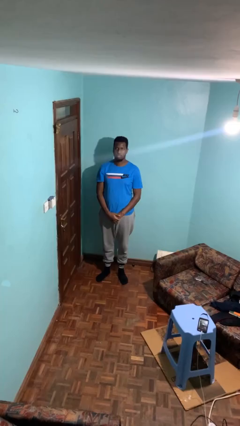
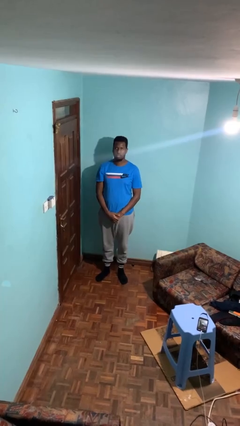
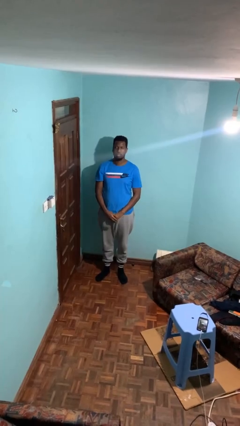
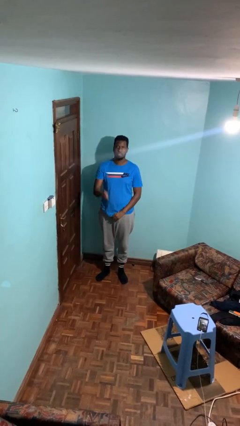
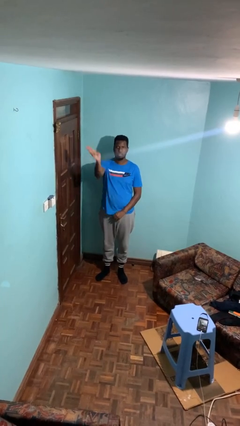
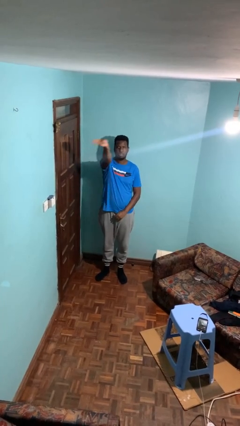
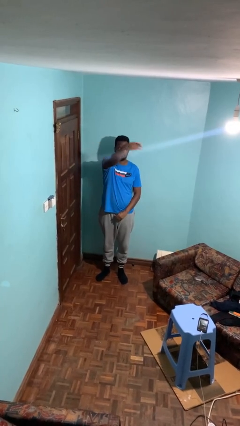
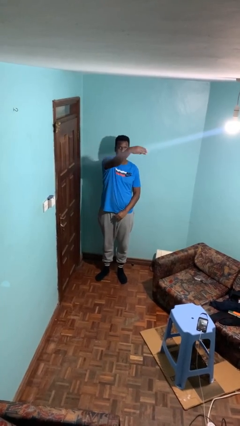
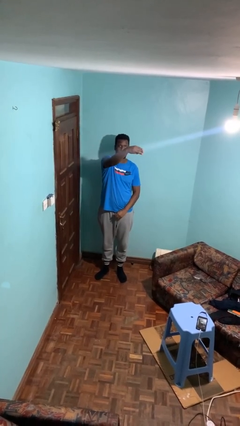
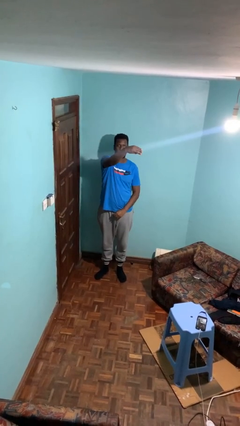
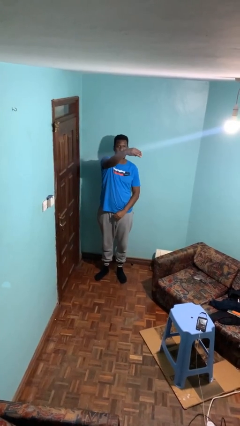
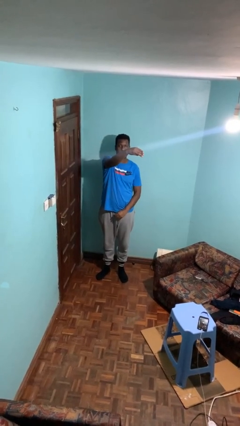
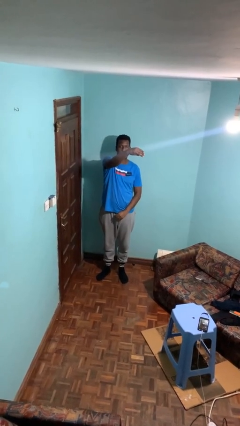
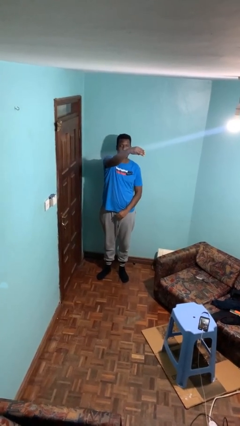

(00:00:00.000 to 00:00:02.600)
person gestures swipe left

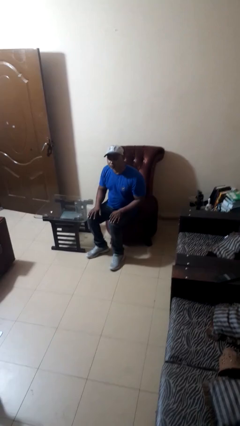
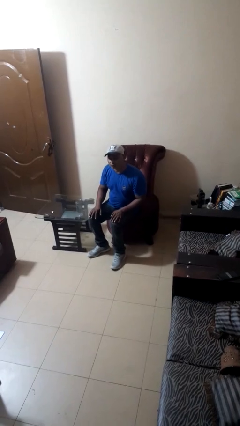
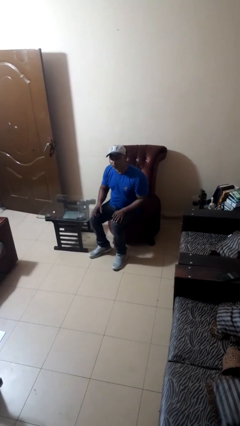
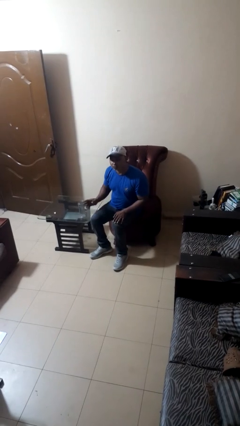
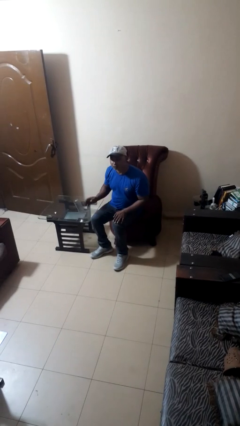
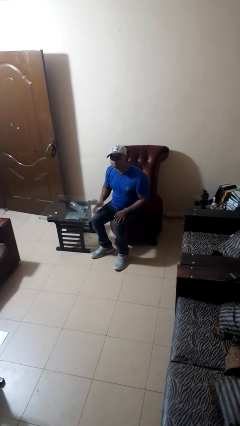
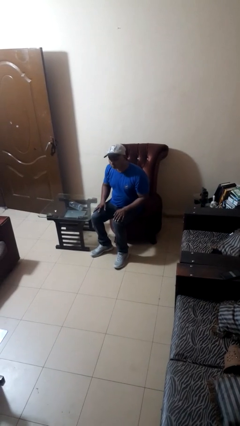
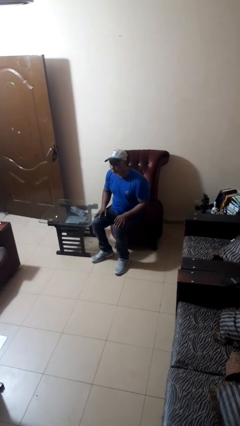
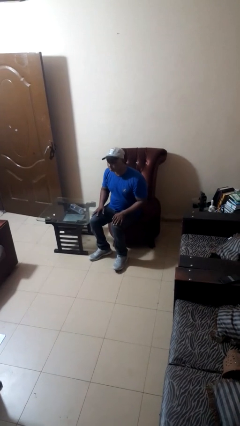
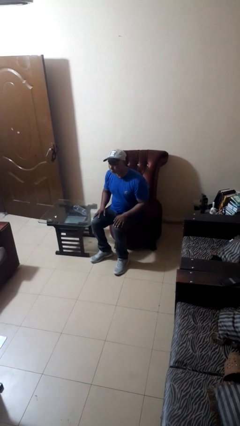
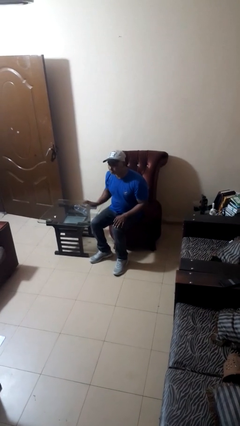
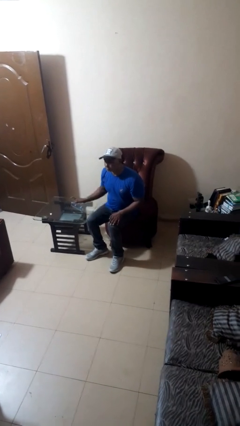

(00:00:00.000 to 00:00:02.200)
person knocks over glass

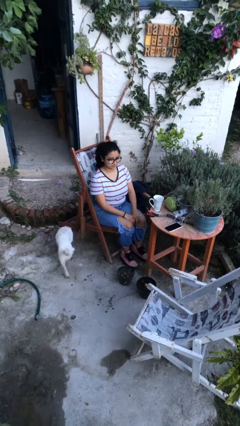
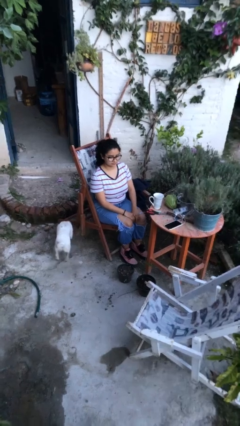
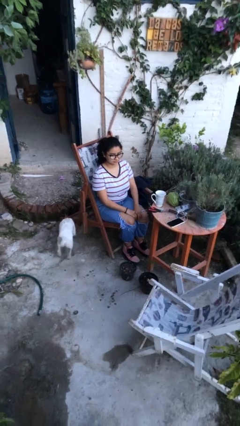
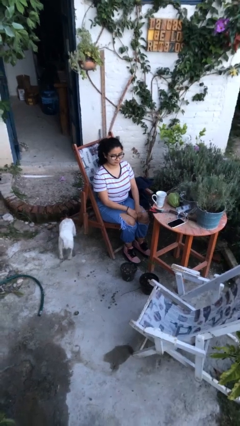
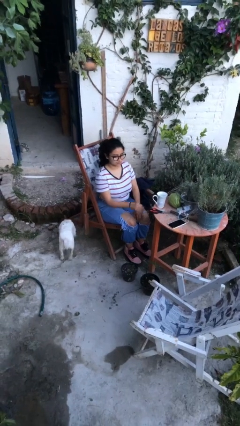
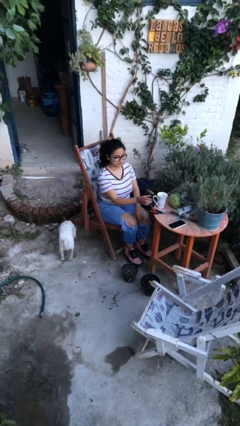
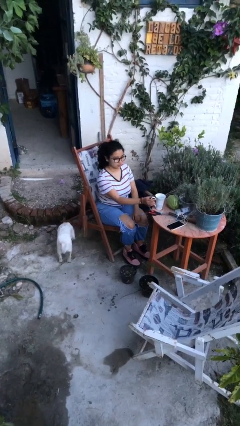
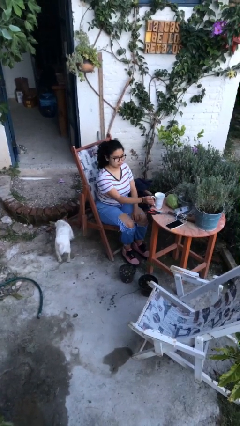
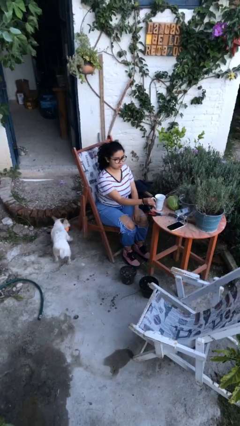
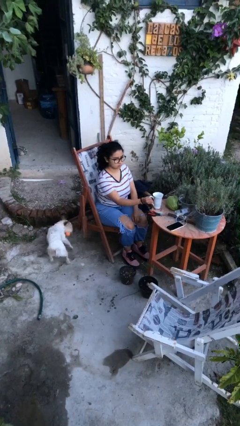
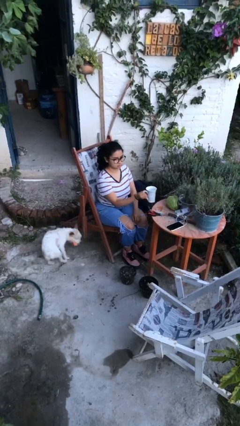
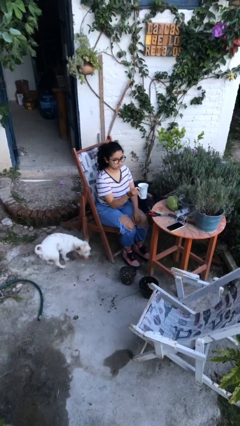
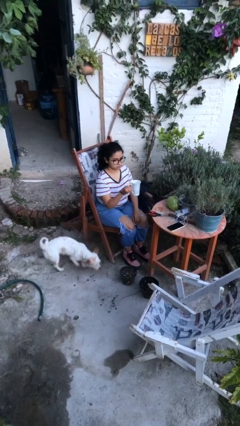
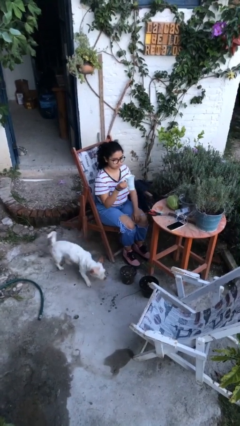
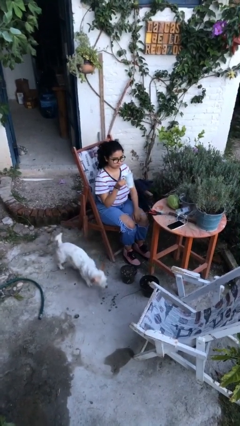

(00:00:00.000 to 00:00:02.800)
person picks up object from table

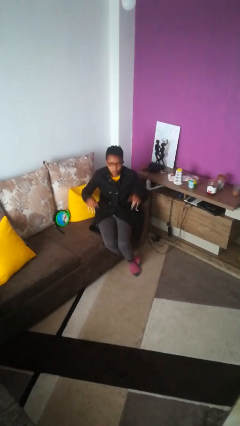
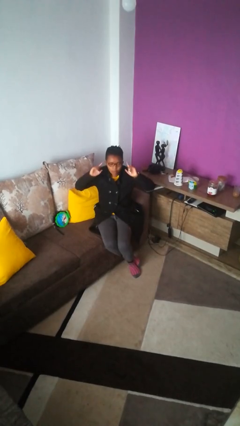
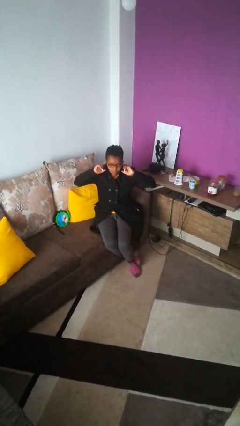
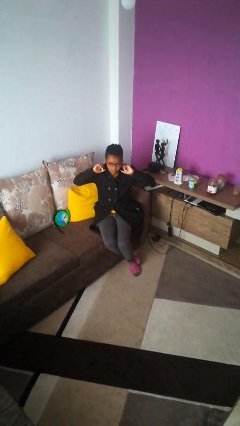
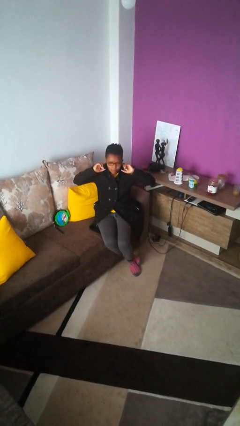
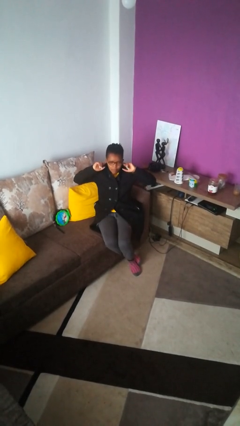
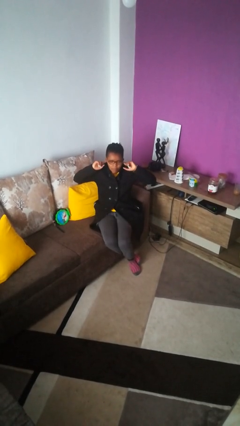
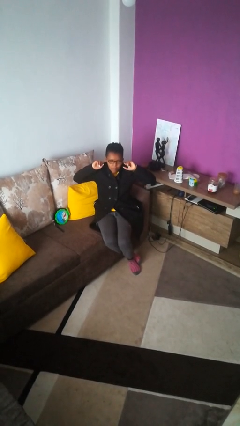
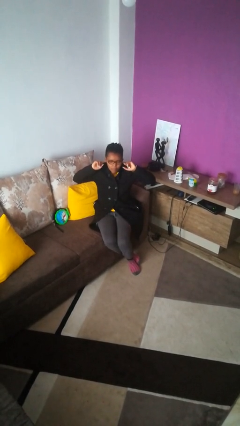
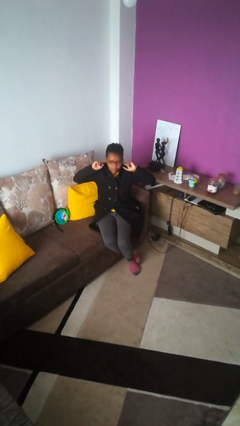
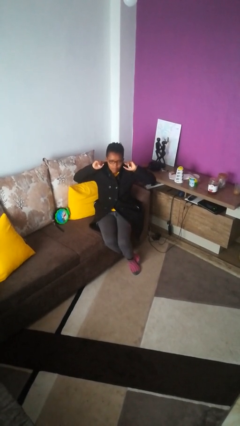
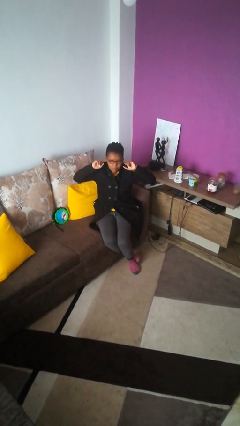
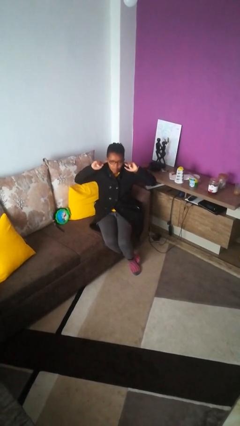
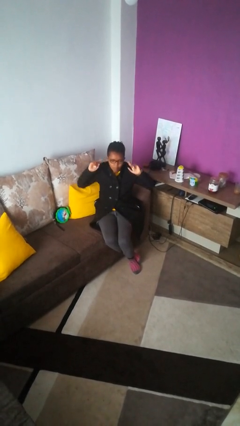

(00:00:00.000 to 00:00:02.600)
person puts fingers in ear

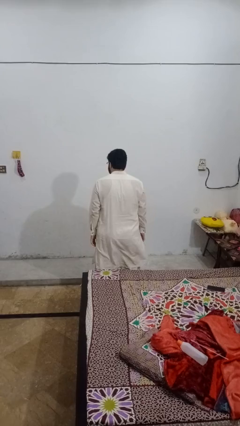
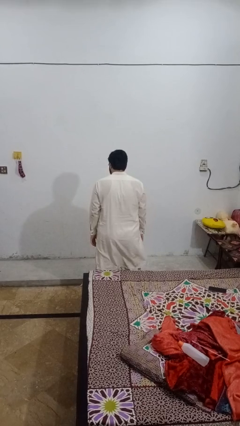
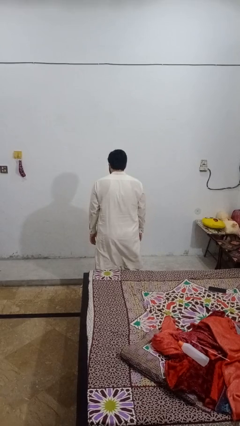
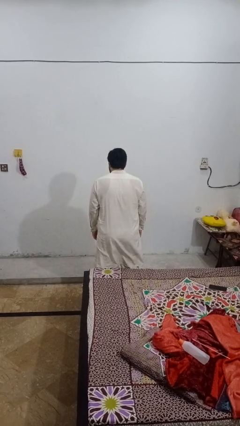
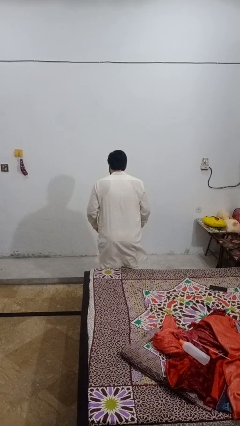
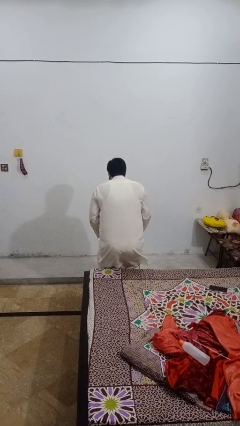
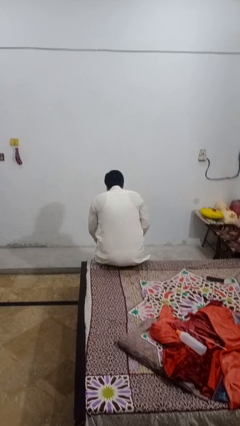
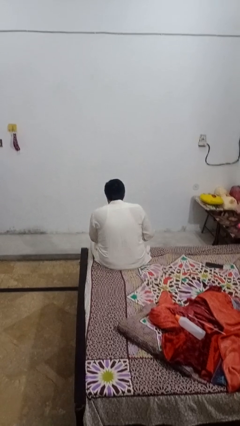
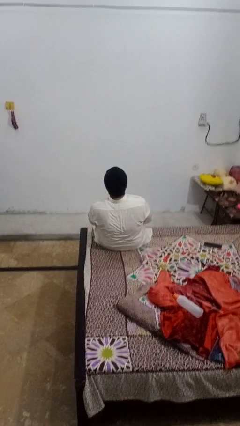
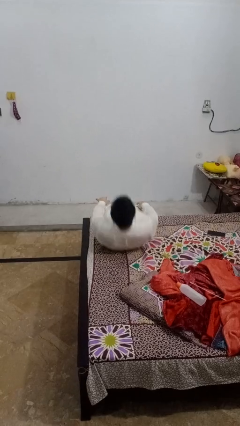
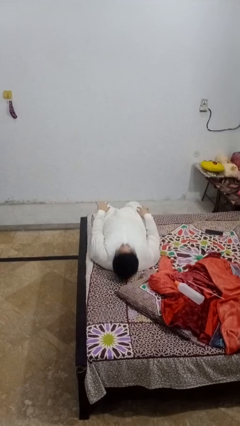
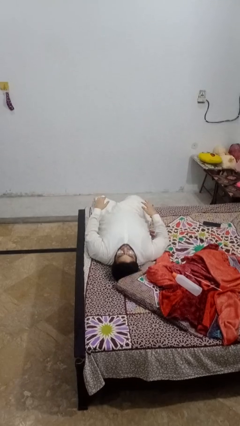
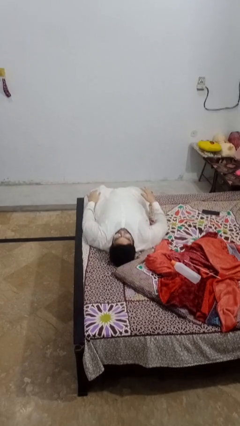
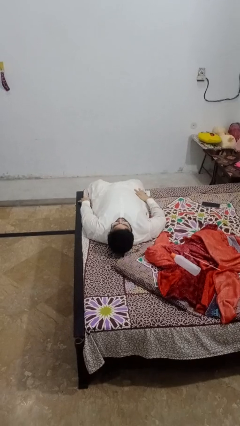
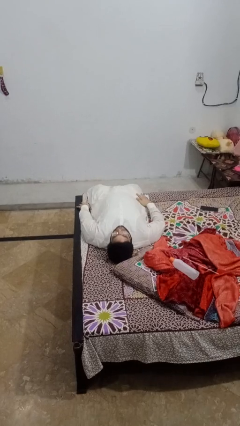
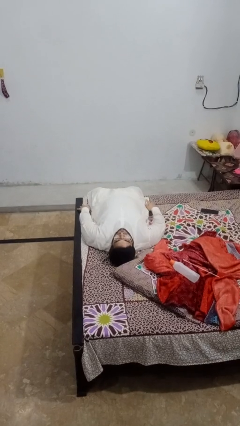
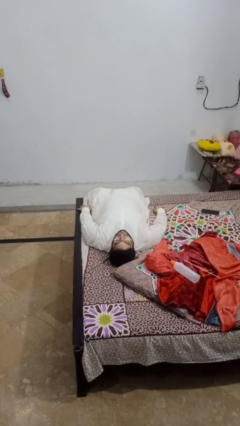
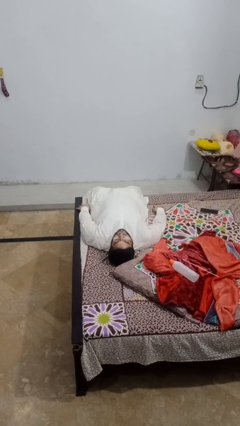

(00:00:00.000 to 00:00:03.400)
person lies down on bed

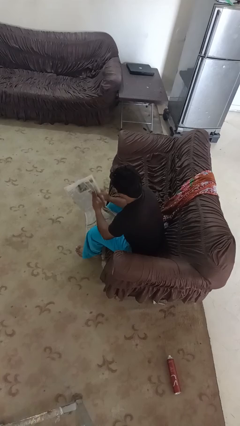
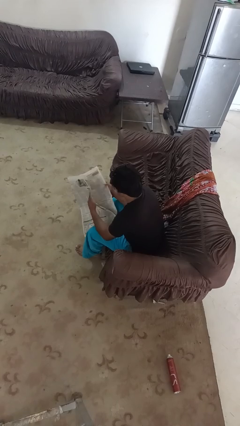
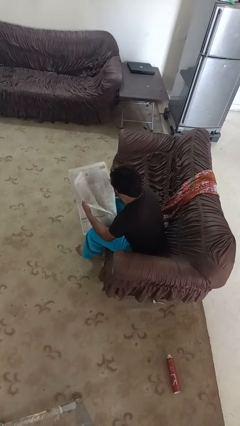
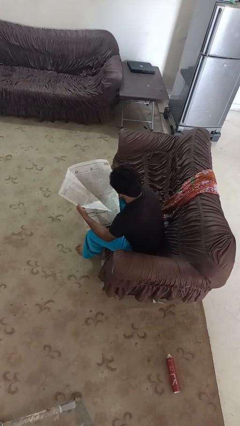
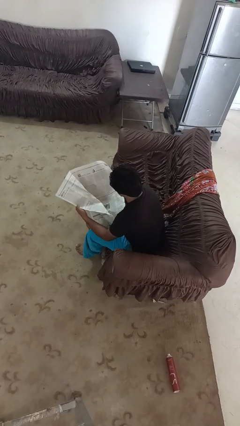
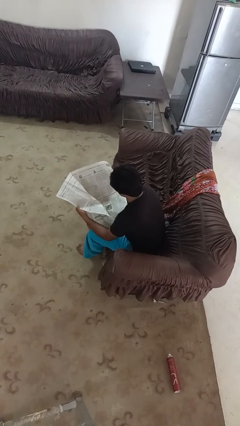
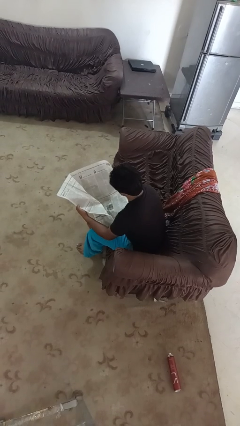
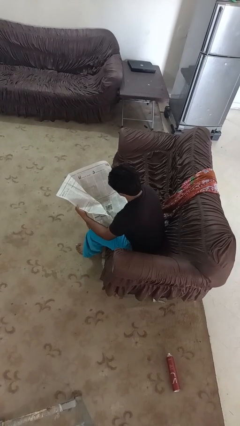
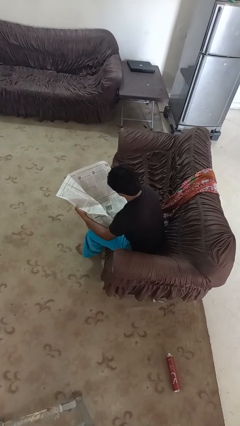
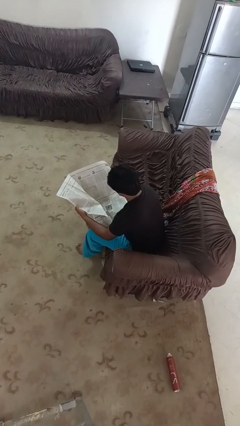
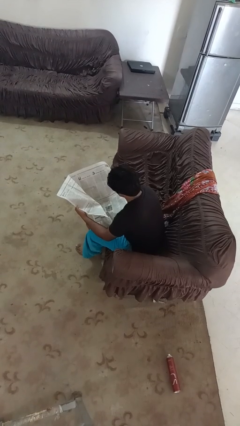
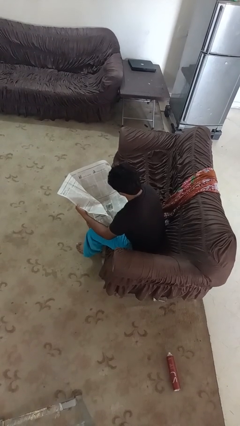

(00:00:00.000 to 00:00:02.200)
person reads newspaper

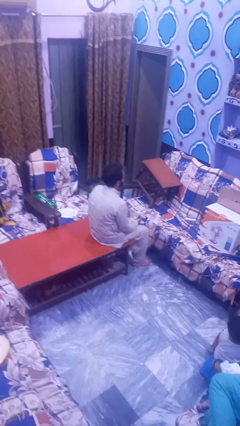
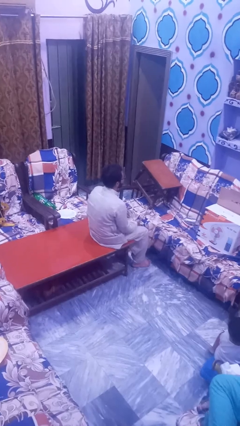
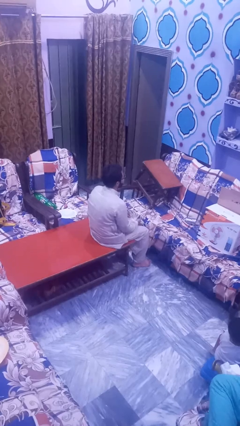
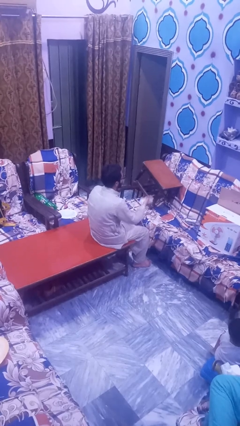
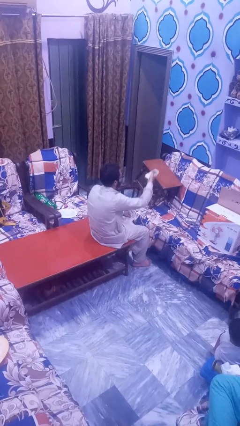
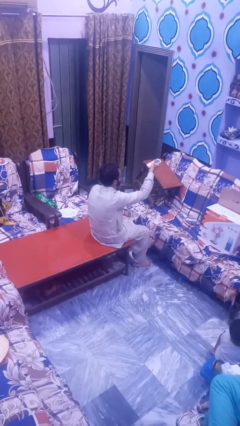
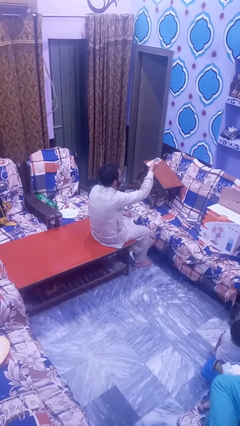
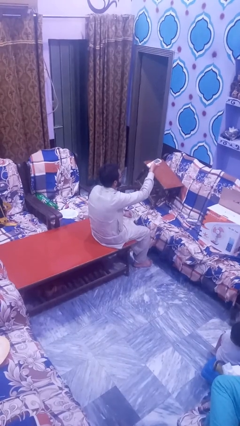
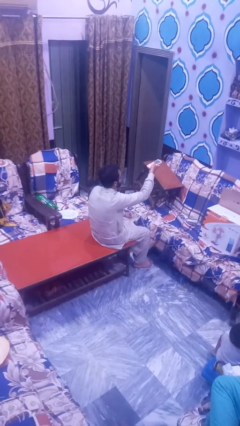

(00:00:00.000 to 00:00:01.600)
person uses television remote
